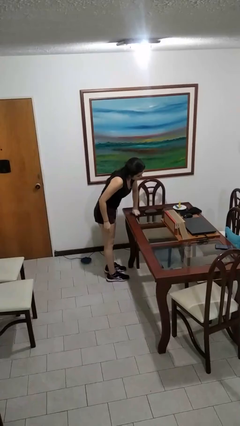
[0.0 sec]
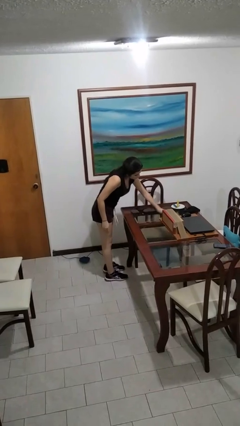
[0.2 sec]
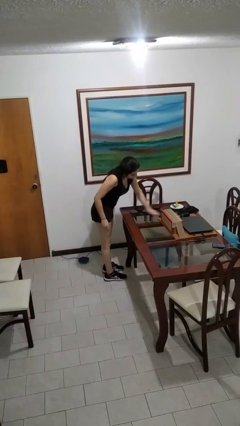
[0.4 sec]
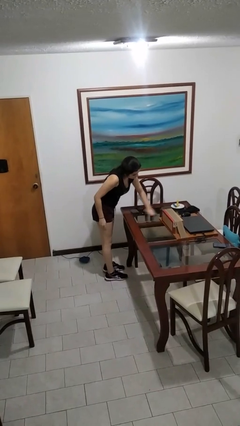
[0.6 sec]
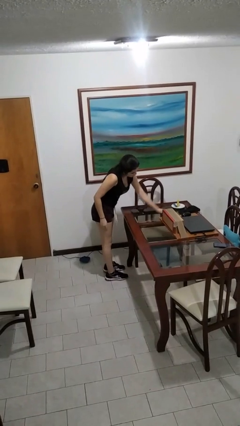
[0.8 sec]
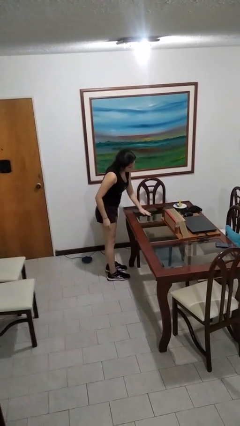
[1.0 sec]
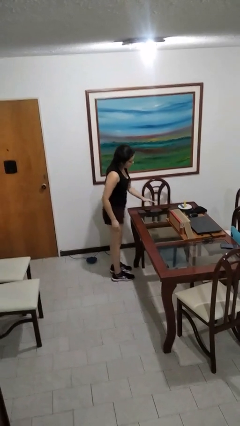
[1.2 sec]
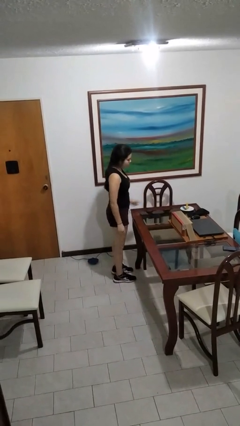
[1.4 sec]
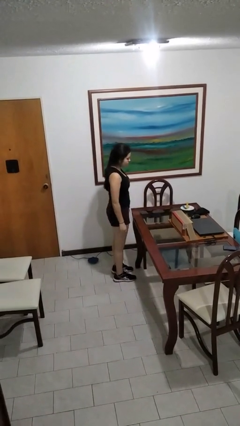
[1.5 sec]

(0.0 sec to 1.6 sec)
person cleans table with rag

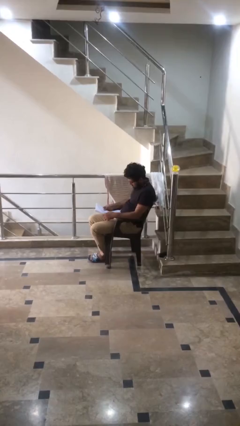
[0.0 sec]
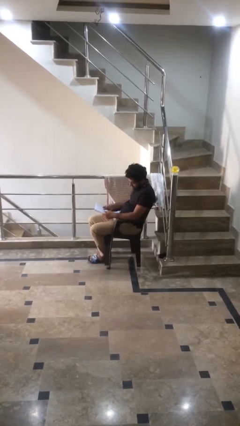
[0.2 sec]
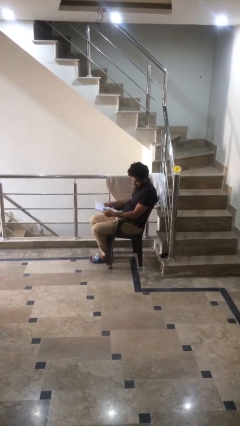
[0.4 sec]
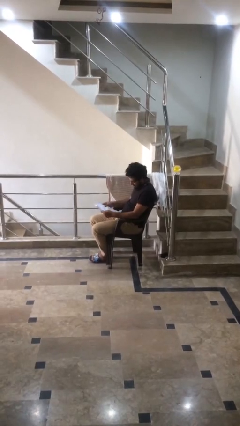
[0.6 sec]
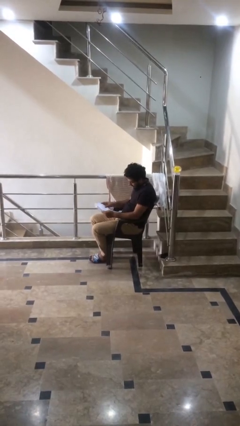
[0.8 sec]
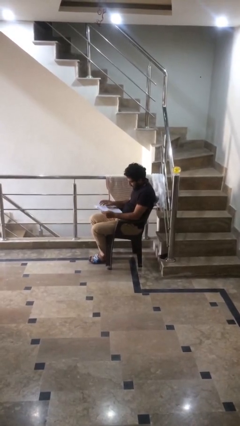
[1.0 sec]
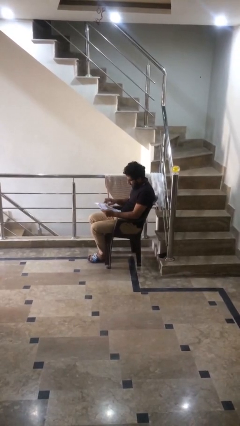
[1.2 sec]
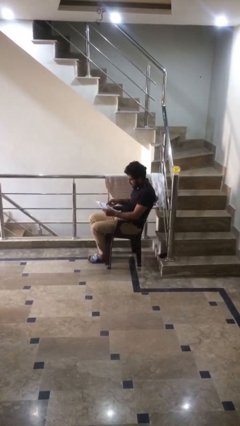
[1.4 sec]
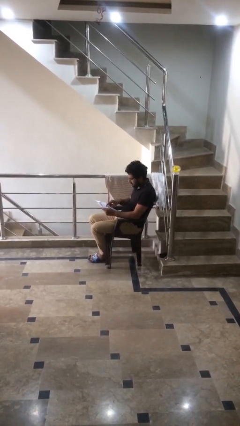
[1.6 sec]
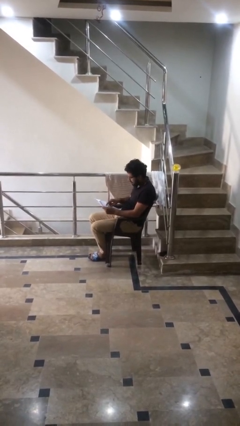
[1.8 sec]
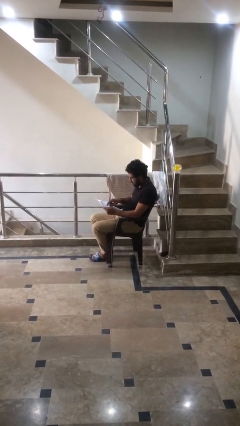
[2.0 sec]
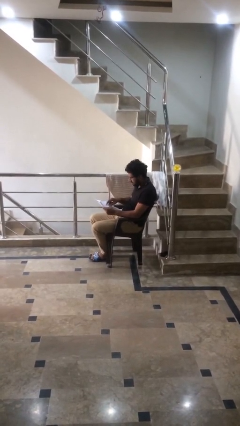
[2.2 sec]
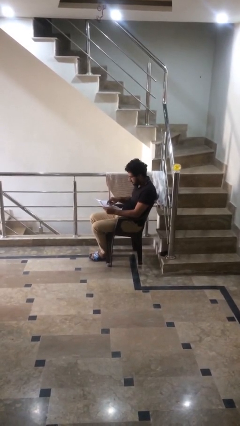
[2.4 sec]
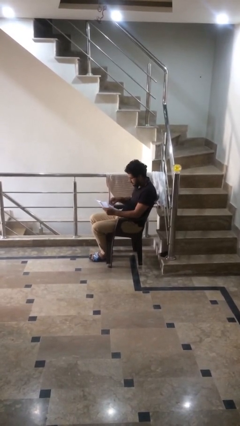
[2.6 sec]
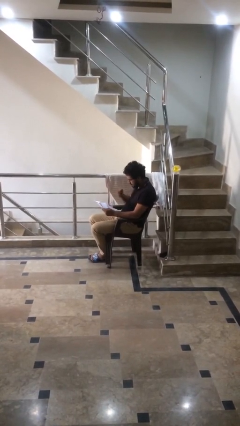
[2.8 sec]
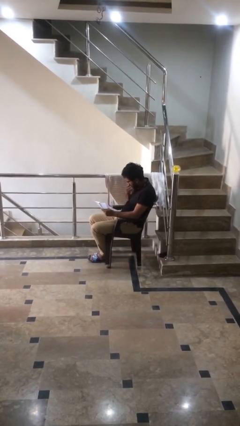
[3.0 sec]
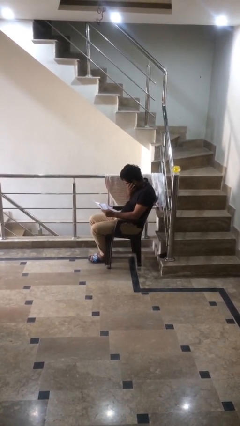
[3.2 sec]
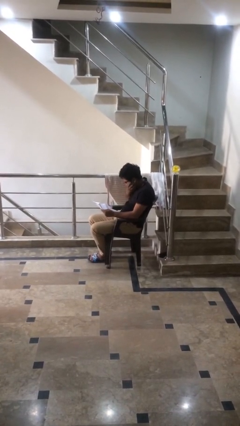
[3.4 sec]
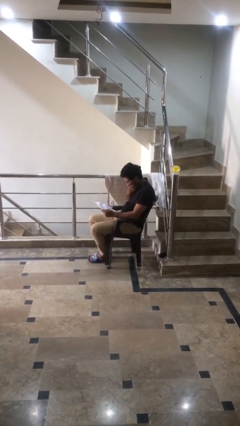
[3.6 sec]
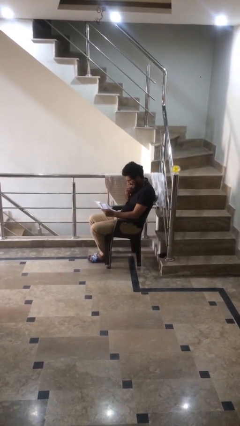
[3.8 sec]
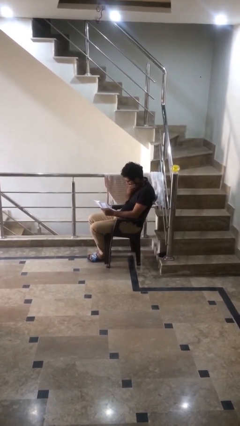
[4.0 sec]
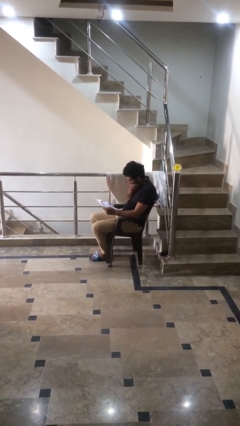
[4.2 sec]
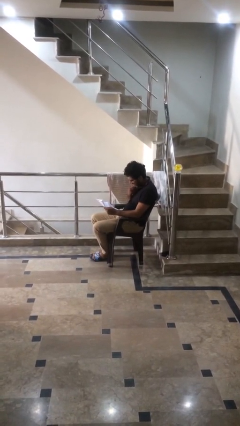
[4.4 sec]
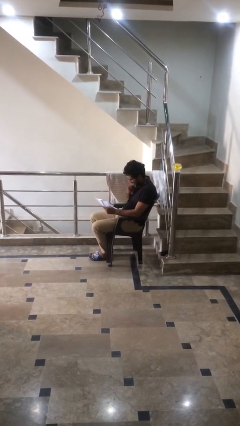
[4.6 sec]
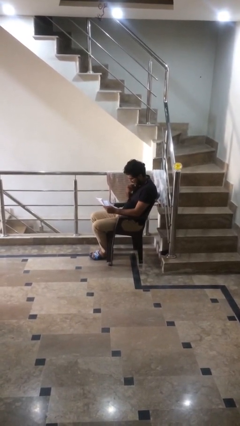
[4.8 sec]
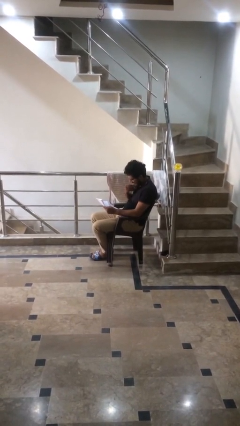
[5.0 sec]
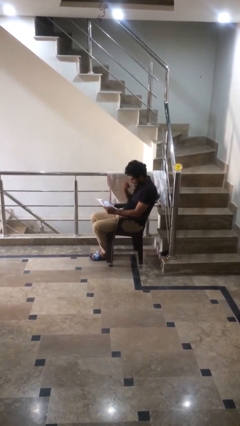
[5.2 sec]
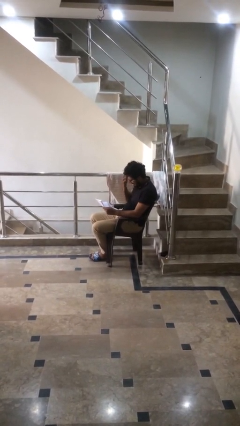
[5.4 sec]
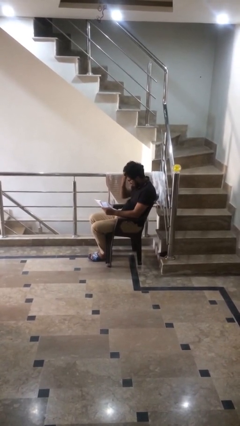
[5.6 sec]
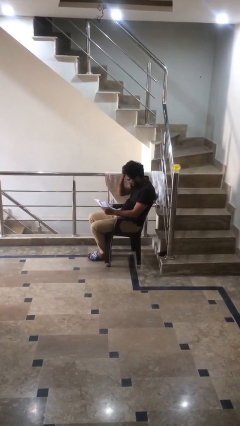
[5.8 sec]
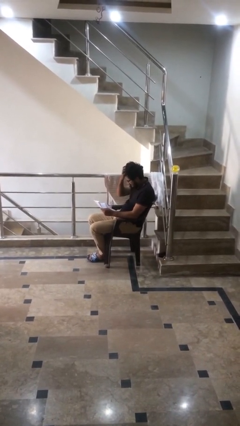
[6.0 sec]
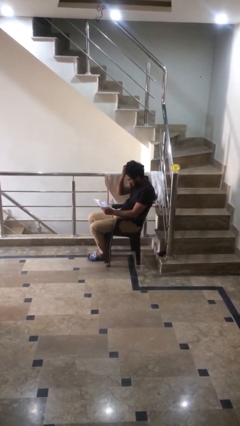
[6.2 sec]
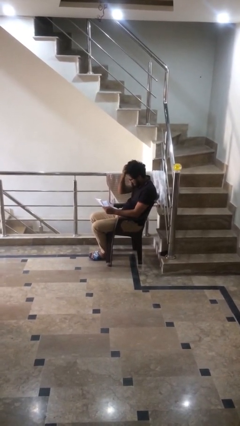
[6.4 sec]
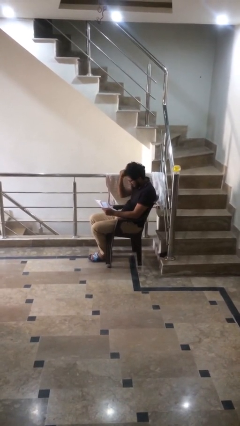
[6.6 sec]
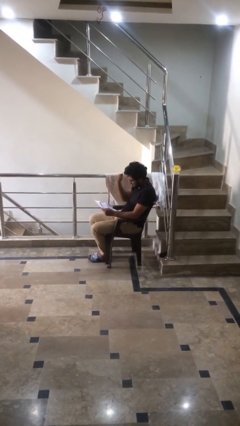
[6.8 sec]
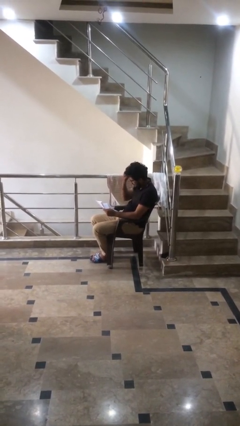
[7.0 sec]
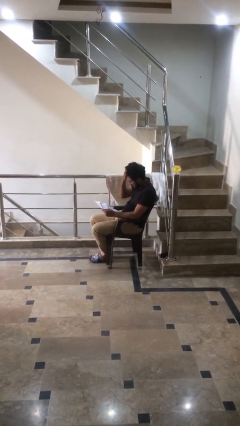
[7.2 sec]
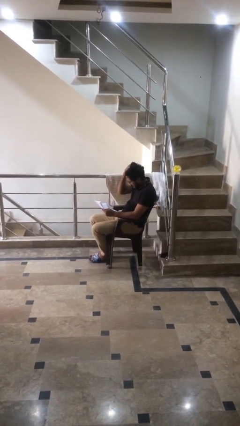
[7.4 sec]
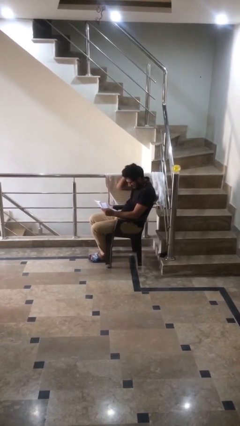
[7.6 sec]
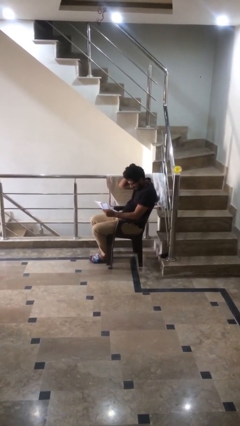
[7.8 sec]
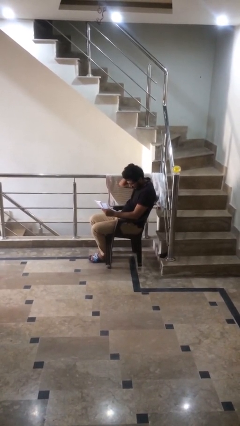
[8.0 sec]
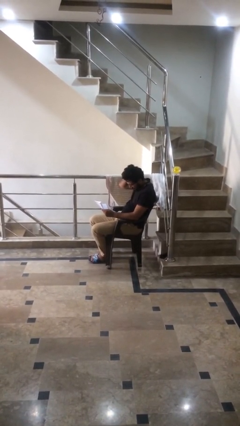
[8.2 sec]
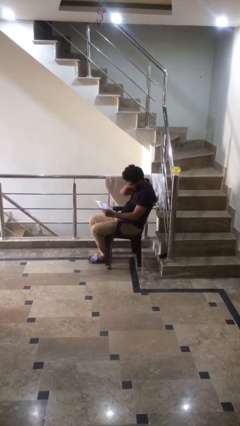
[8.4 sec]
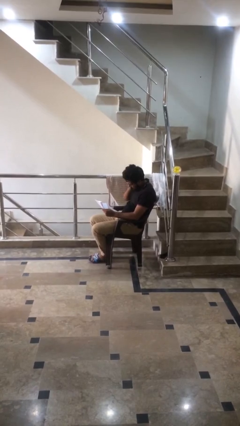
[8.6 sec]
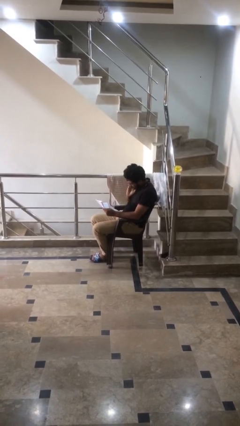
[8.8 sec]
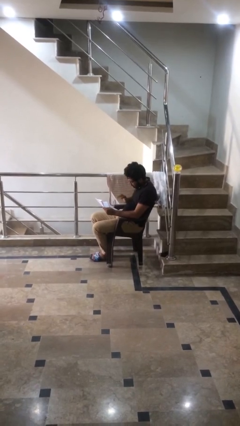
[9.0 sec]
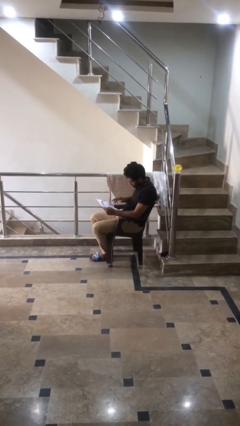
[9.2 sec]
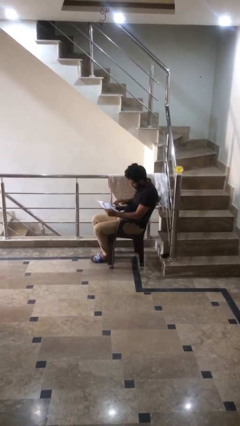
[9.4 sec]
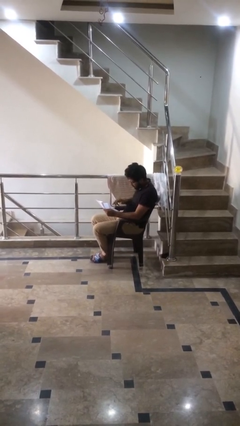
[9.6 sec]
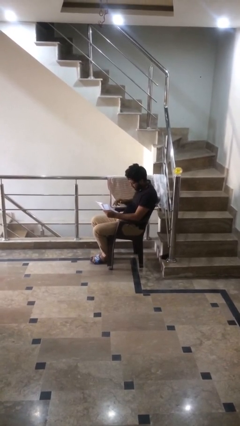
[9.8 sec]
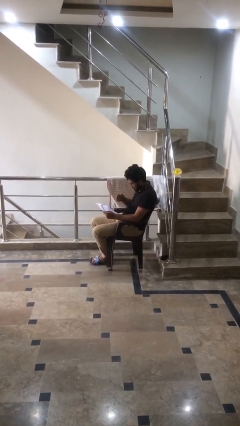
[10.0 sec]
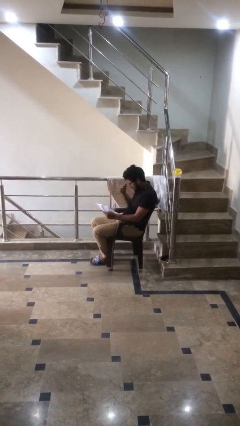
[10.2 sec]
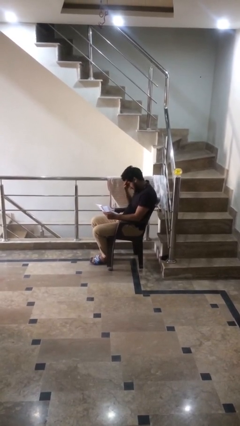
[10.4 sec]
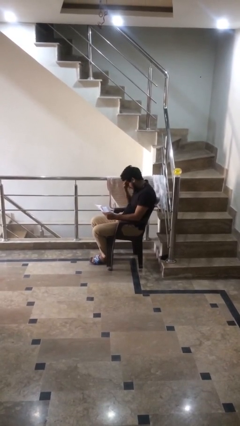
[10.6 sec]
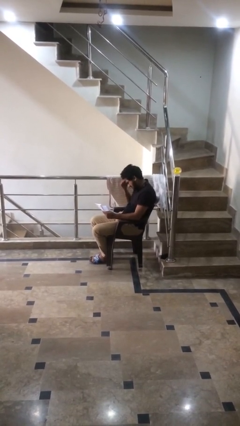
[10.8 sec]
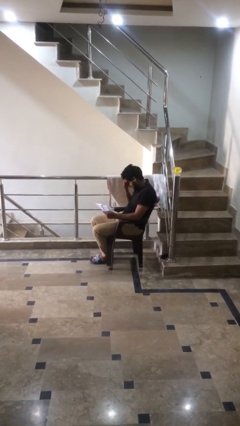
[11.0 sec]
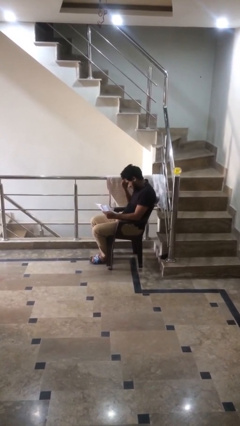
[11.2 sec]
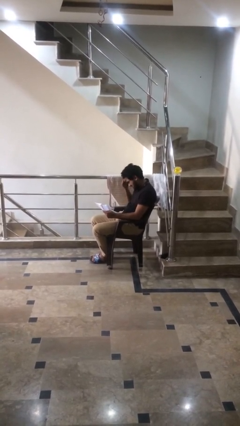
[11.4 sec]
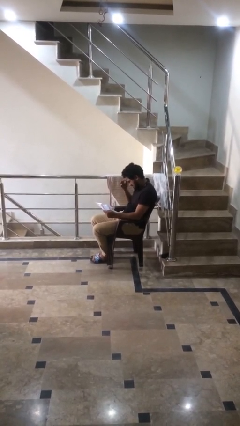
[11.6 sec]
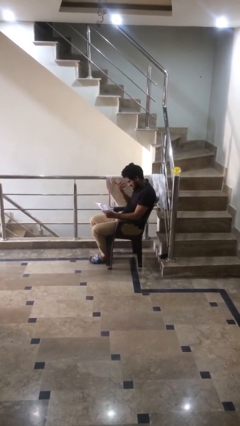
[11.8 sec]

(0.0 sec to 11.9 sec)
person reads document

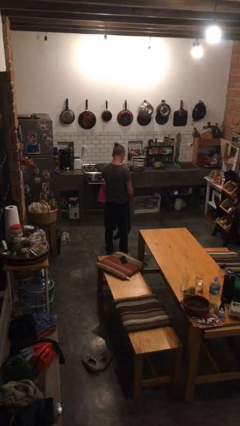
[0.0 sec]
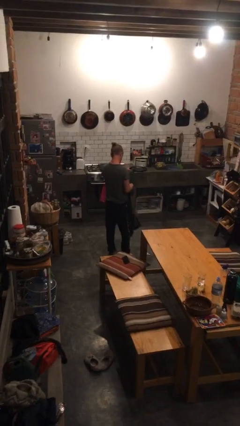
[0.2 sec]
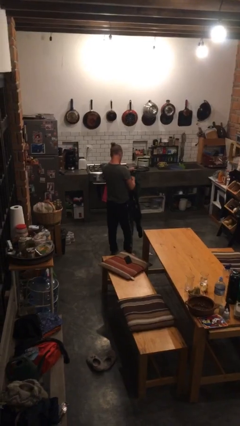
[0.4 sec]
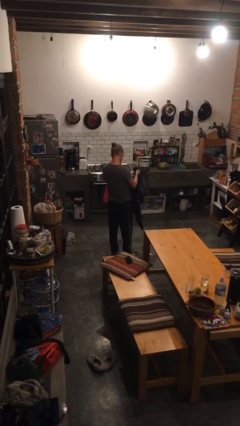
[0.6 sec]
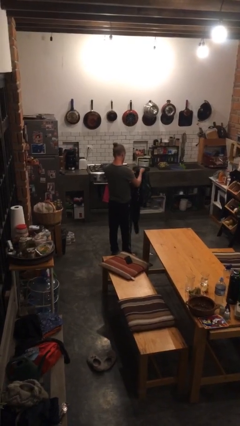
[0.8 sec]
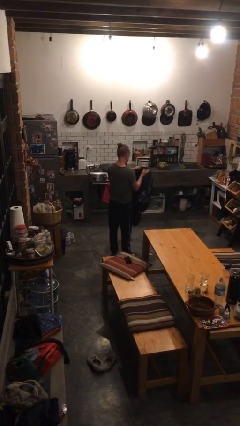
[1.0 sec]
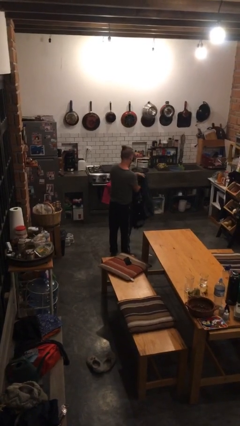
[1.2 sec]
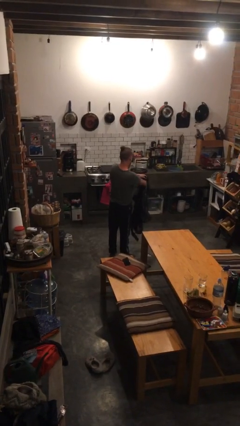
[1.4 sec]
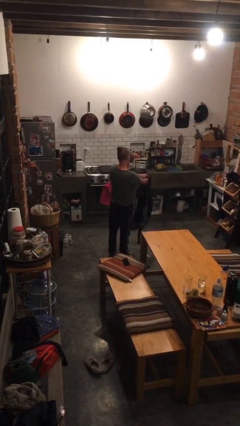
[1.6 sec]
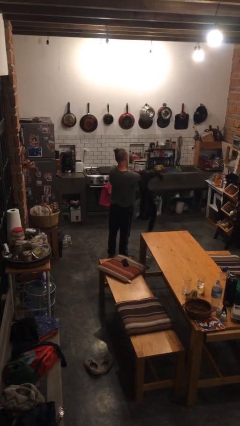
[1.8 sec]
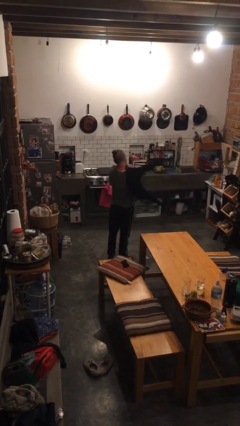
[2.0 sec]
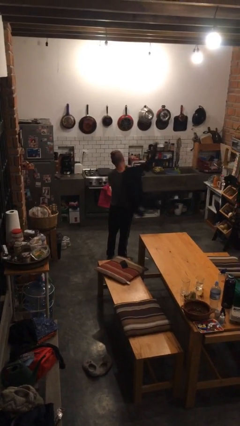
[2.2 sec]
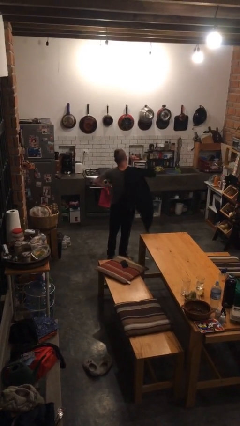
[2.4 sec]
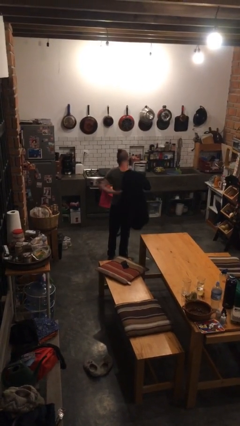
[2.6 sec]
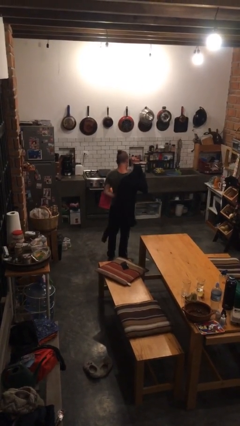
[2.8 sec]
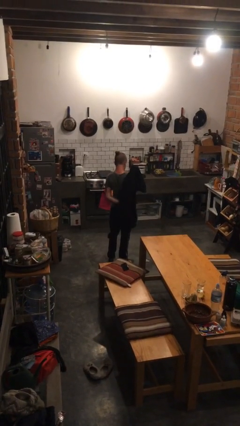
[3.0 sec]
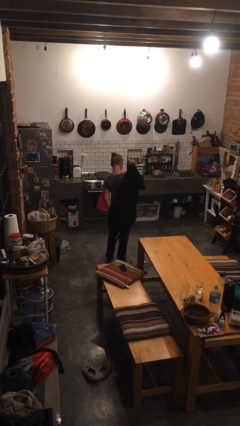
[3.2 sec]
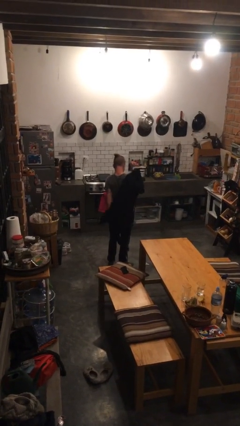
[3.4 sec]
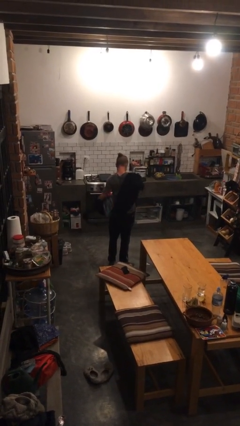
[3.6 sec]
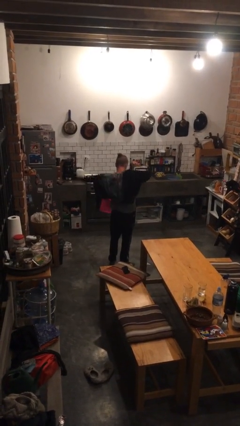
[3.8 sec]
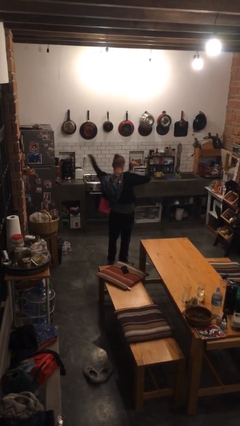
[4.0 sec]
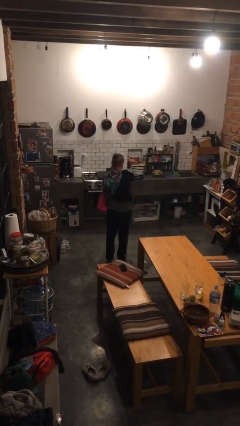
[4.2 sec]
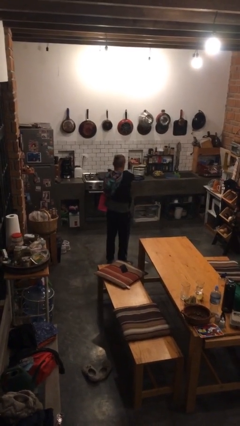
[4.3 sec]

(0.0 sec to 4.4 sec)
person puts on hoodie
